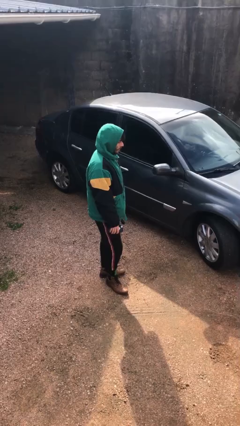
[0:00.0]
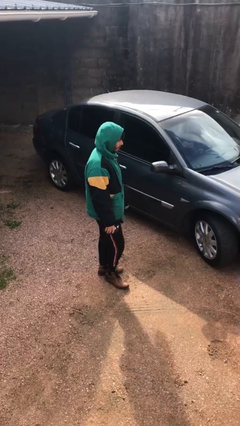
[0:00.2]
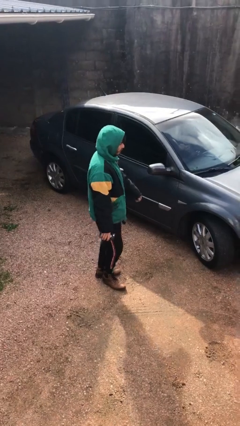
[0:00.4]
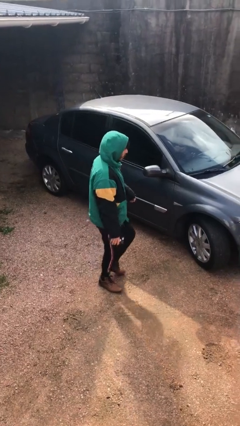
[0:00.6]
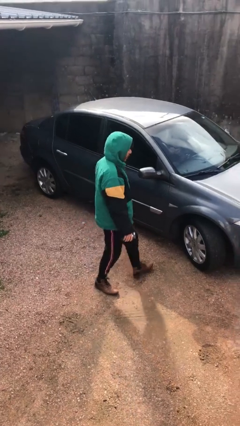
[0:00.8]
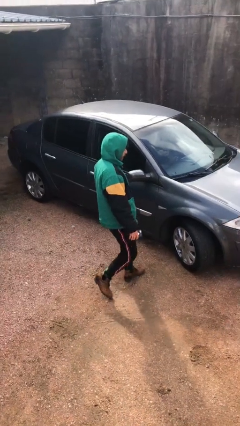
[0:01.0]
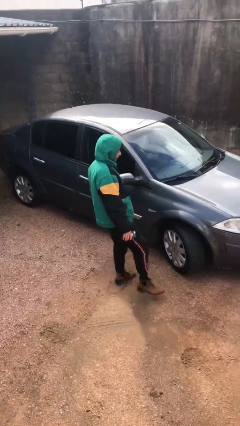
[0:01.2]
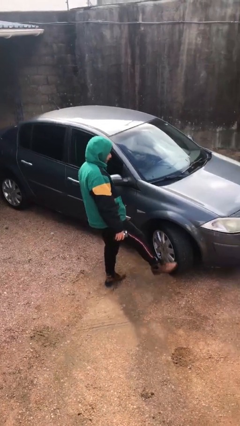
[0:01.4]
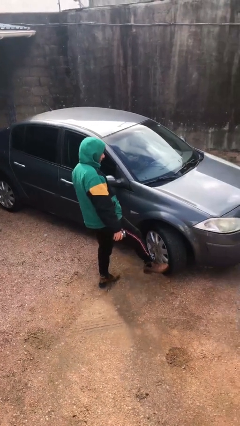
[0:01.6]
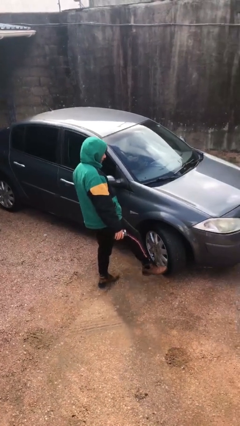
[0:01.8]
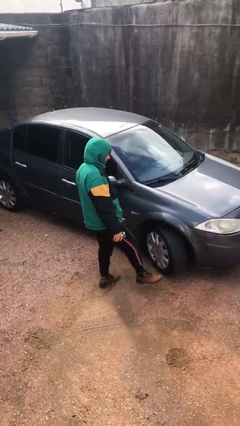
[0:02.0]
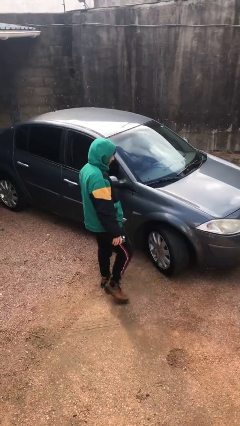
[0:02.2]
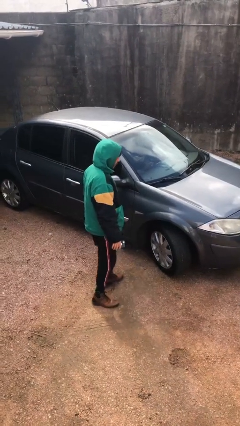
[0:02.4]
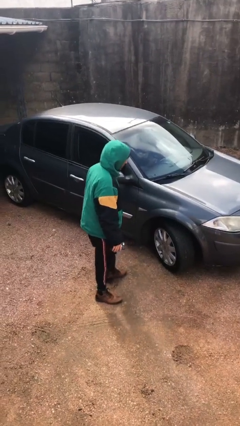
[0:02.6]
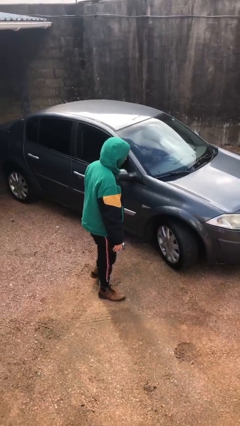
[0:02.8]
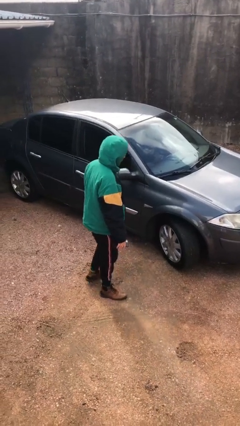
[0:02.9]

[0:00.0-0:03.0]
person kicks car tires

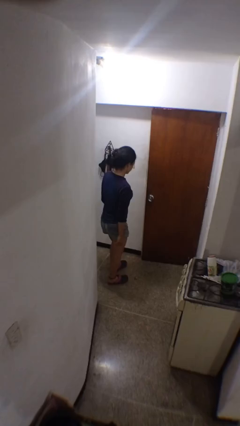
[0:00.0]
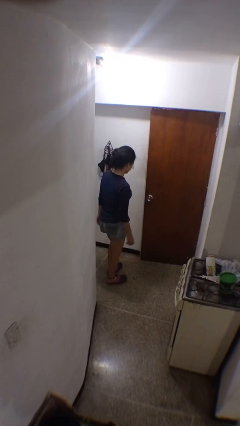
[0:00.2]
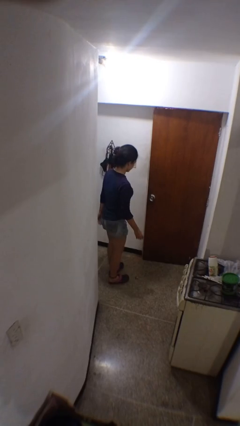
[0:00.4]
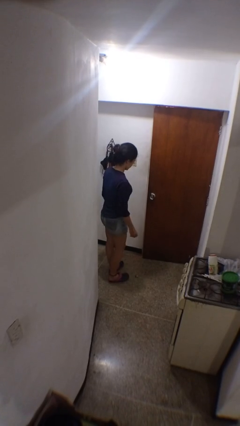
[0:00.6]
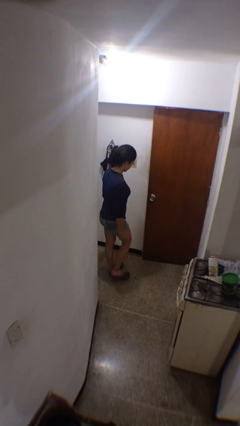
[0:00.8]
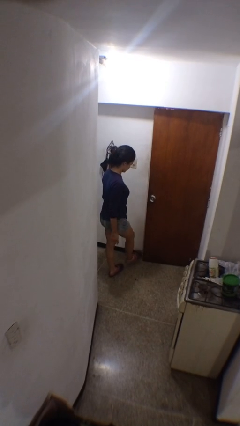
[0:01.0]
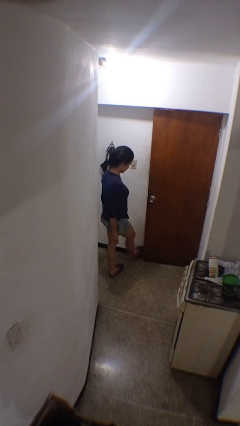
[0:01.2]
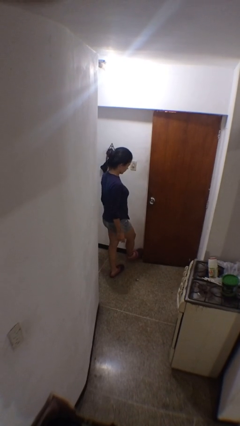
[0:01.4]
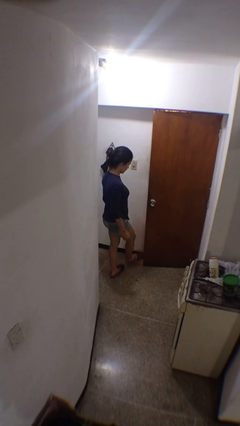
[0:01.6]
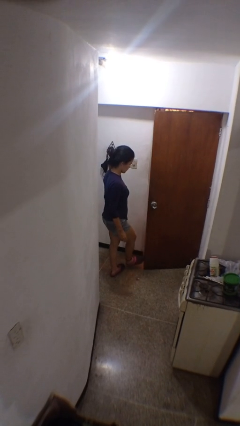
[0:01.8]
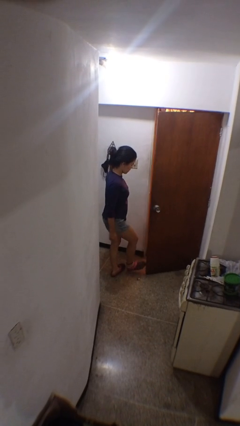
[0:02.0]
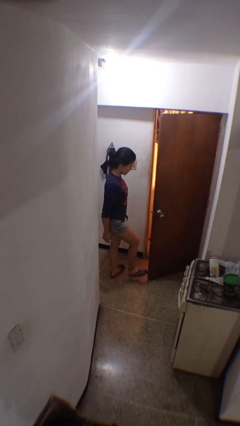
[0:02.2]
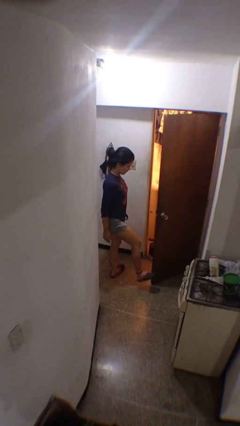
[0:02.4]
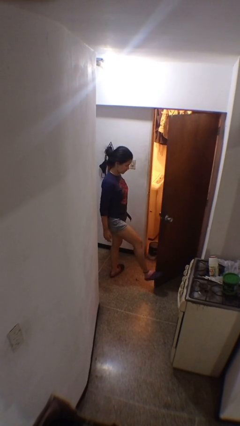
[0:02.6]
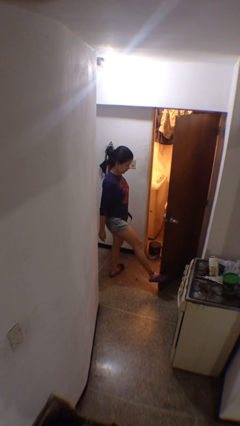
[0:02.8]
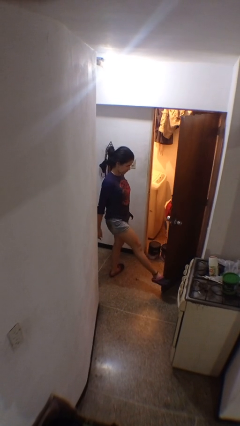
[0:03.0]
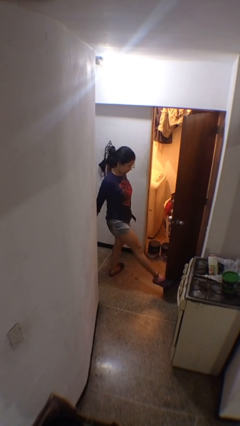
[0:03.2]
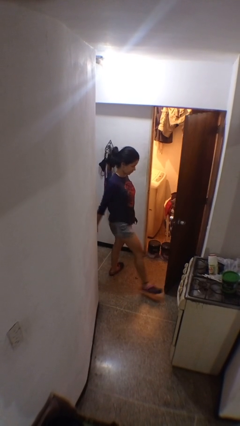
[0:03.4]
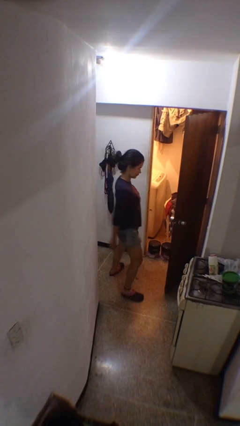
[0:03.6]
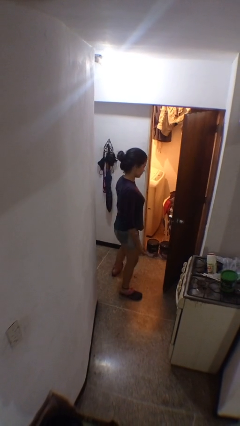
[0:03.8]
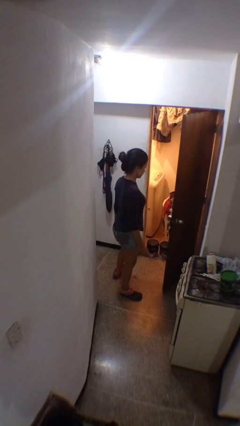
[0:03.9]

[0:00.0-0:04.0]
person opens facility door

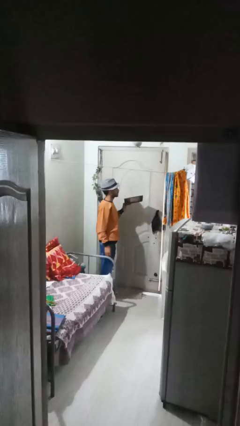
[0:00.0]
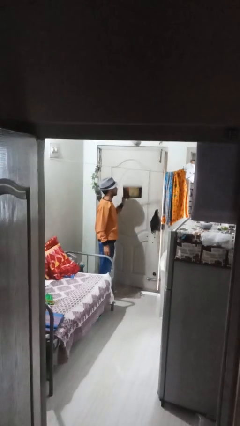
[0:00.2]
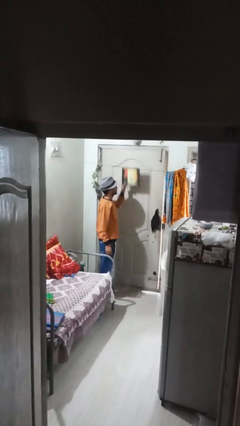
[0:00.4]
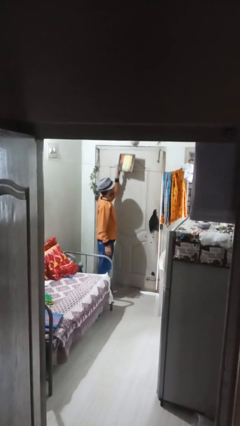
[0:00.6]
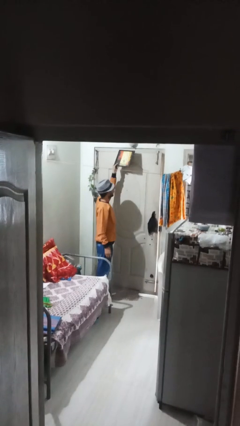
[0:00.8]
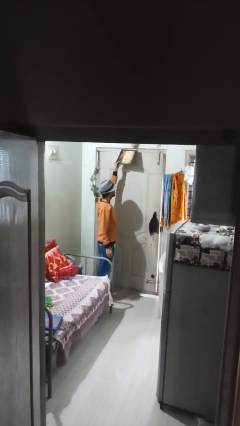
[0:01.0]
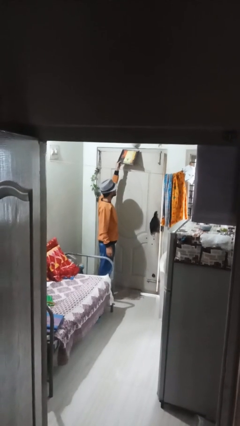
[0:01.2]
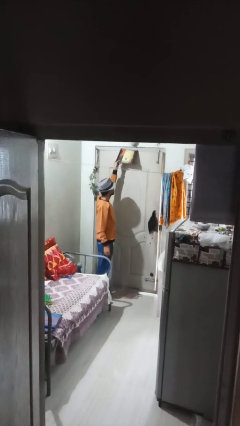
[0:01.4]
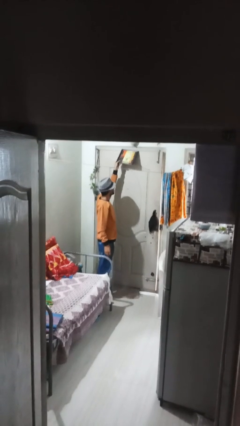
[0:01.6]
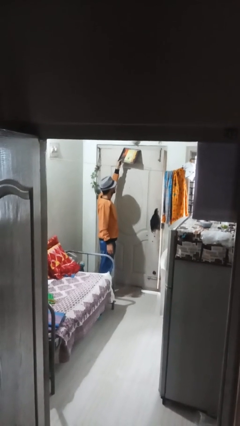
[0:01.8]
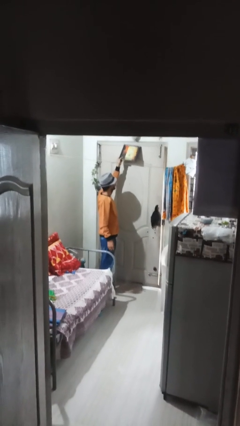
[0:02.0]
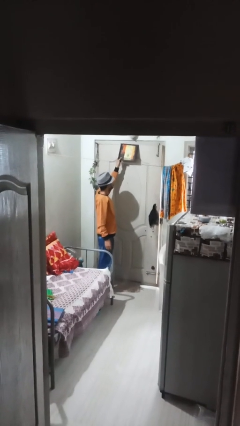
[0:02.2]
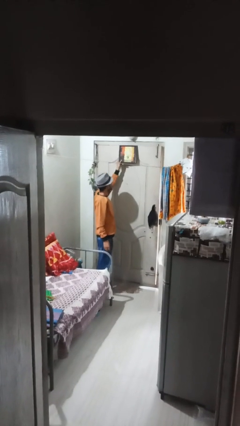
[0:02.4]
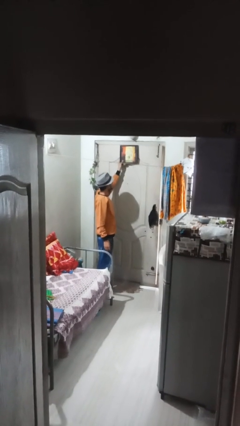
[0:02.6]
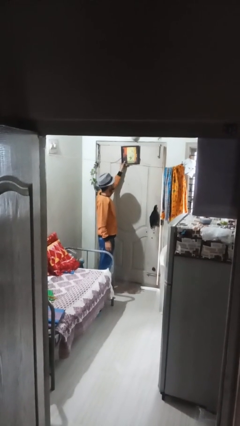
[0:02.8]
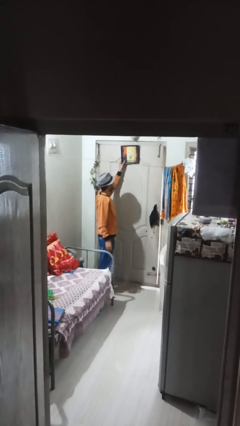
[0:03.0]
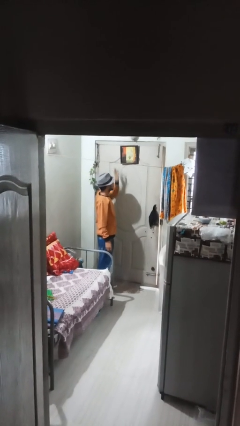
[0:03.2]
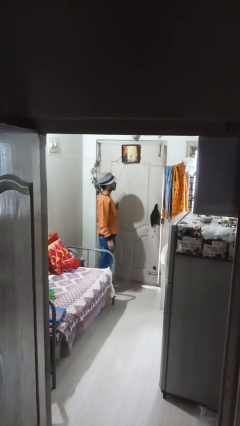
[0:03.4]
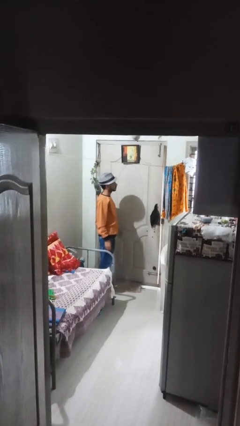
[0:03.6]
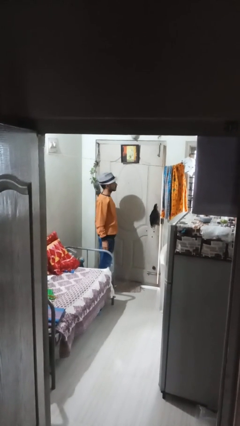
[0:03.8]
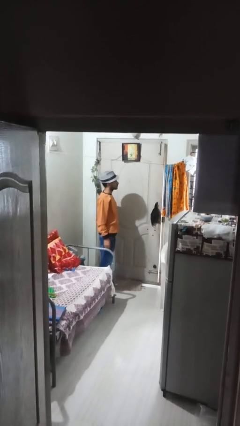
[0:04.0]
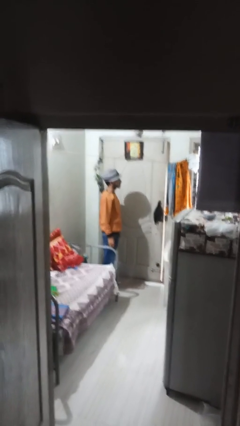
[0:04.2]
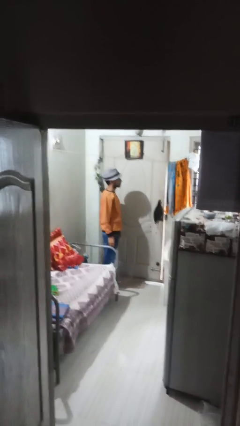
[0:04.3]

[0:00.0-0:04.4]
person puts up picture frame

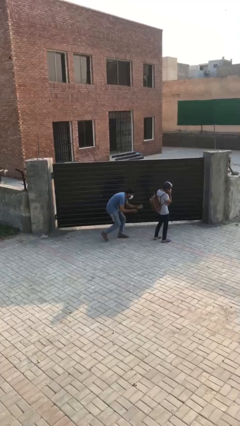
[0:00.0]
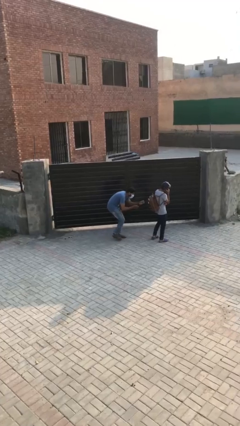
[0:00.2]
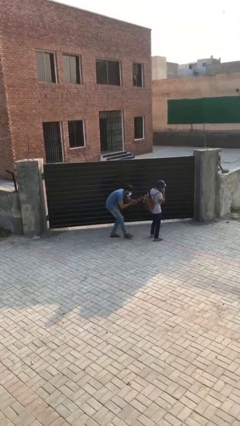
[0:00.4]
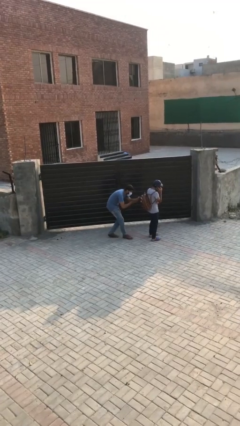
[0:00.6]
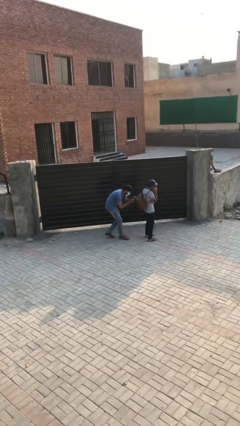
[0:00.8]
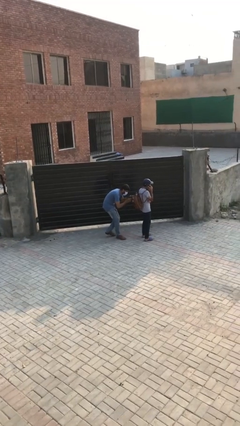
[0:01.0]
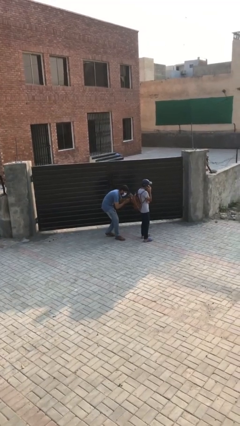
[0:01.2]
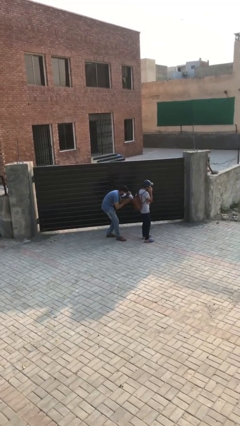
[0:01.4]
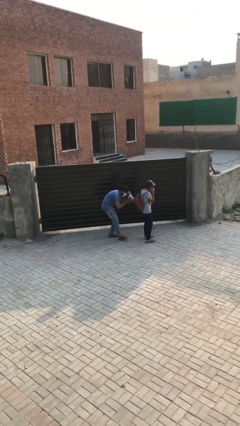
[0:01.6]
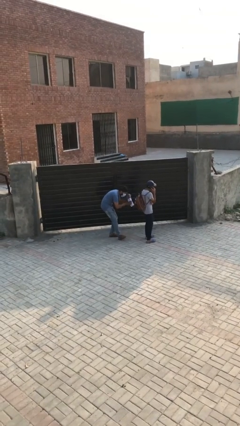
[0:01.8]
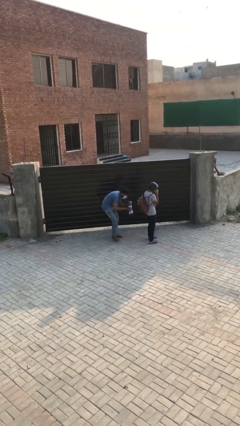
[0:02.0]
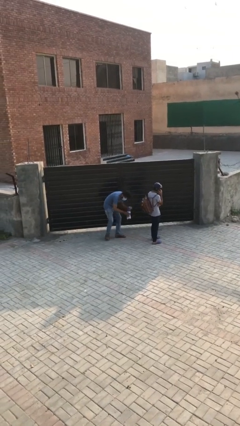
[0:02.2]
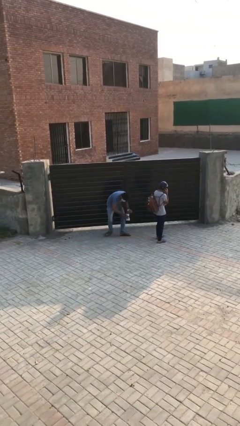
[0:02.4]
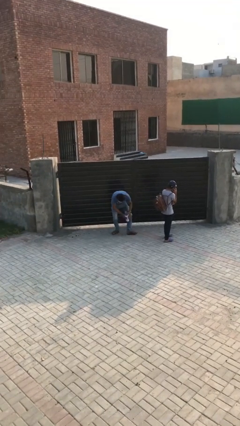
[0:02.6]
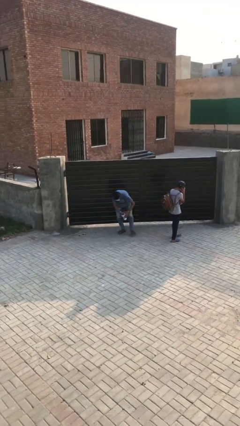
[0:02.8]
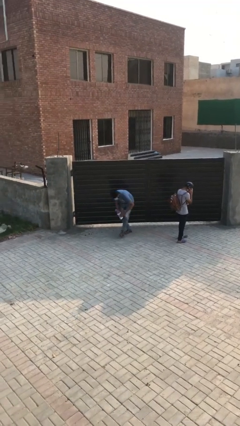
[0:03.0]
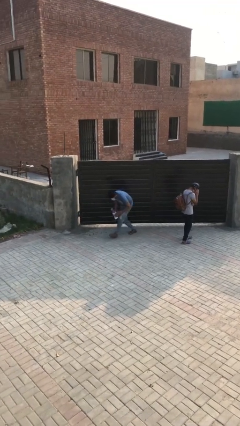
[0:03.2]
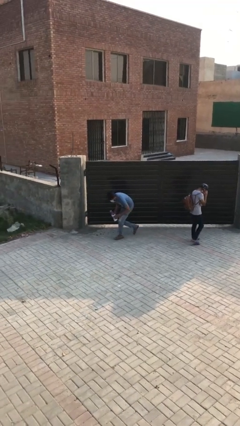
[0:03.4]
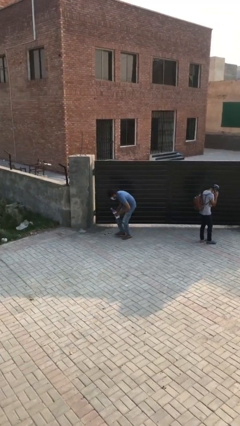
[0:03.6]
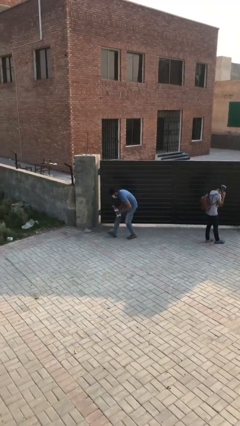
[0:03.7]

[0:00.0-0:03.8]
person steals object from person

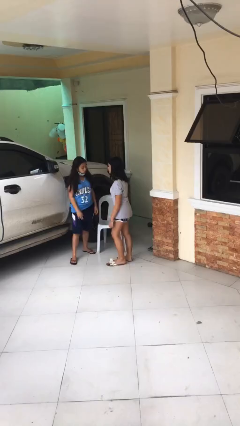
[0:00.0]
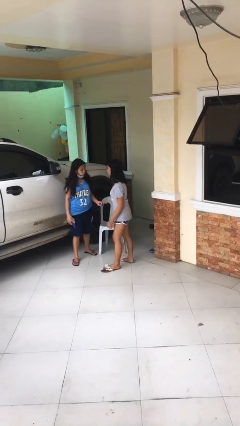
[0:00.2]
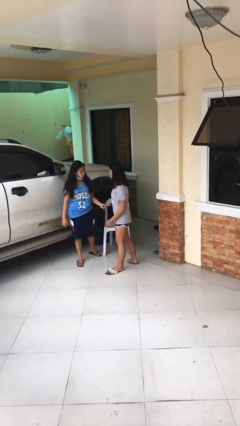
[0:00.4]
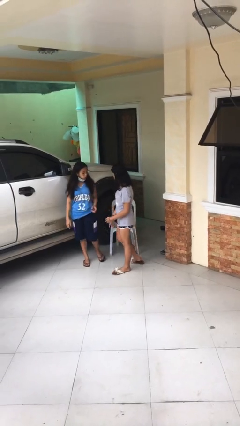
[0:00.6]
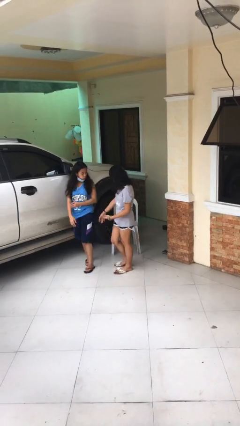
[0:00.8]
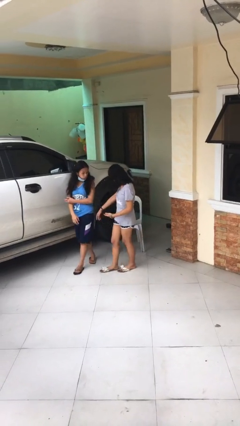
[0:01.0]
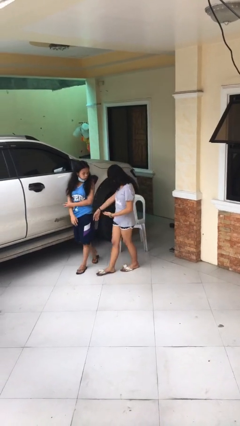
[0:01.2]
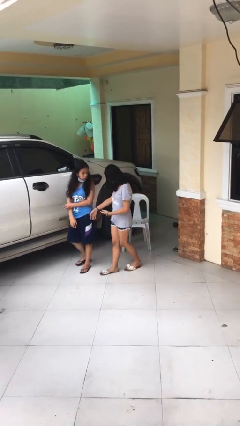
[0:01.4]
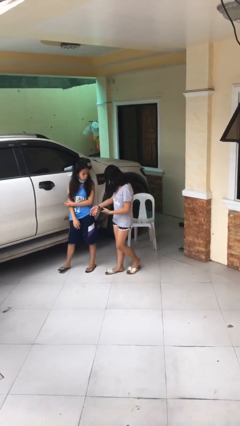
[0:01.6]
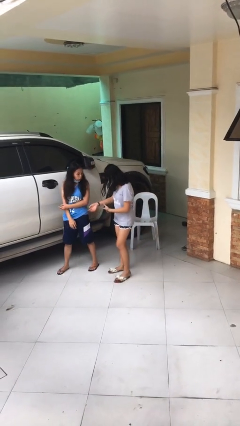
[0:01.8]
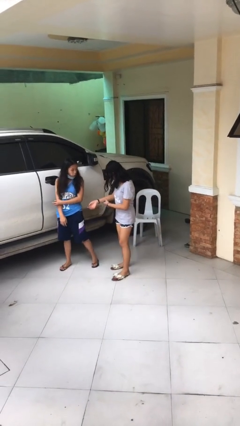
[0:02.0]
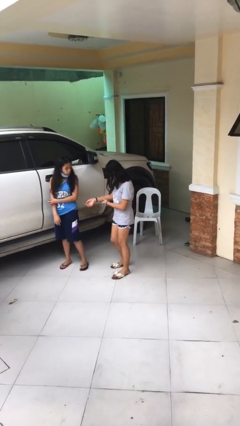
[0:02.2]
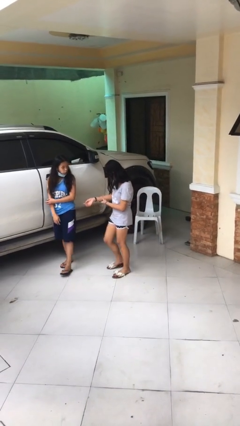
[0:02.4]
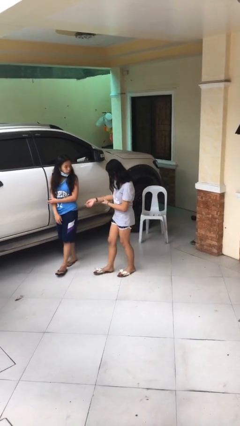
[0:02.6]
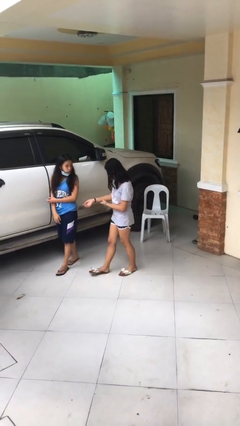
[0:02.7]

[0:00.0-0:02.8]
person talks to person
